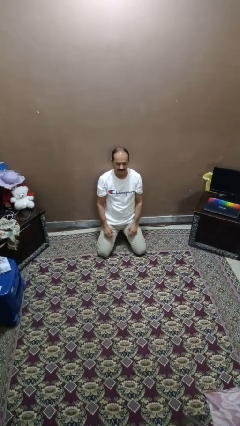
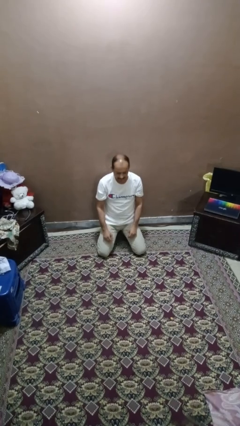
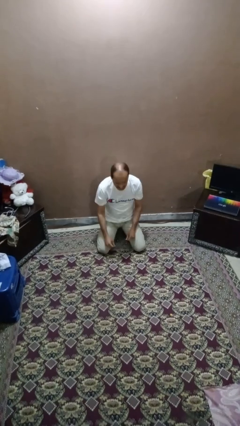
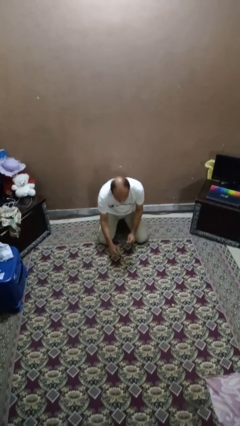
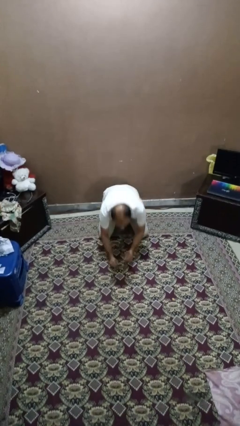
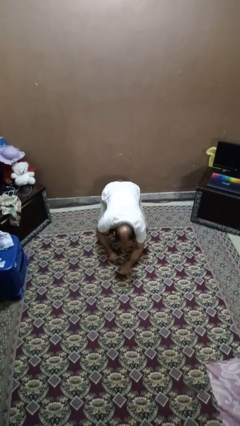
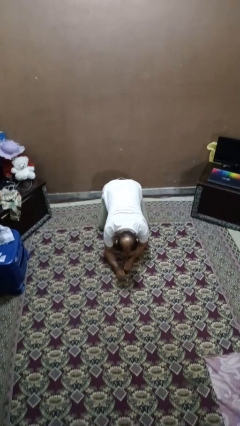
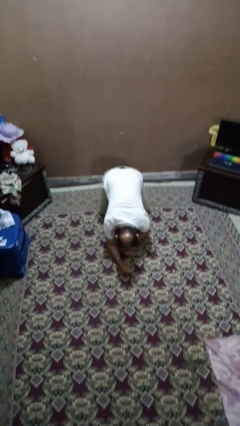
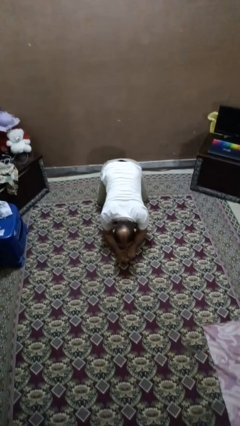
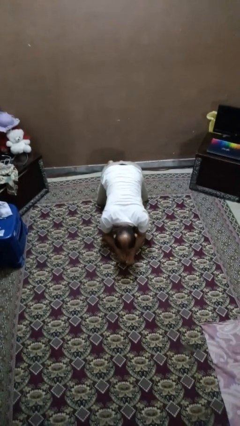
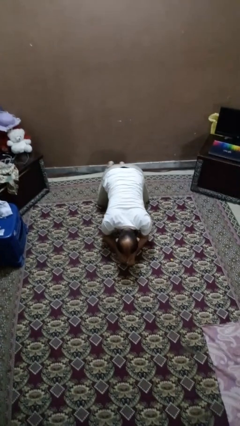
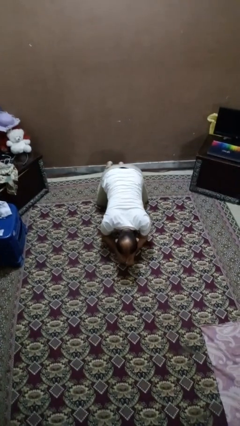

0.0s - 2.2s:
person crawls

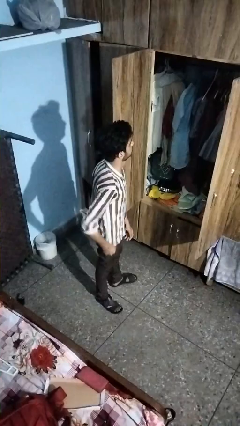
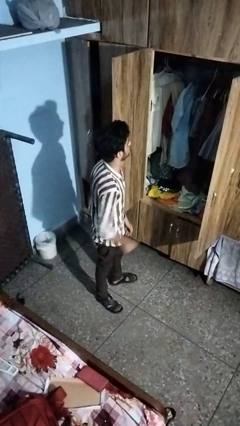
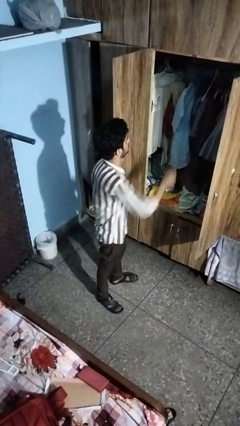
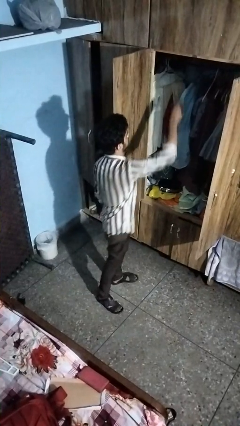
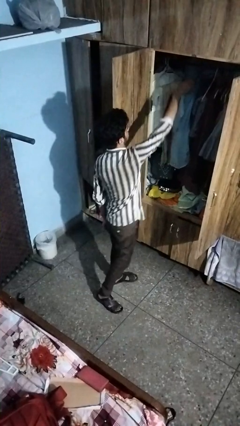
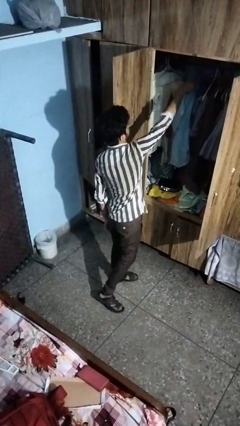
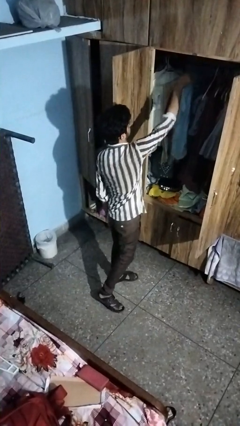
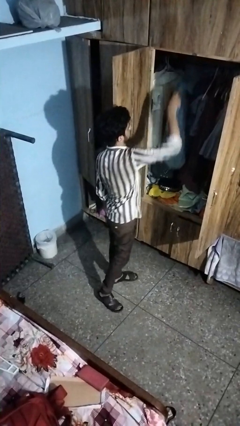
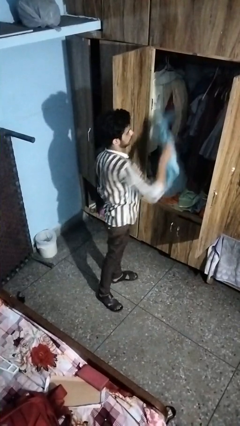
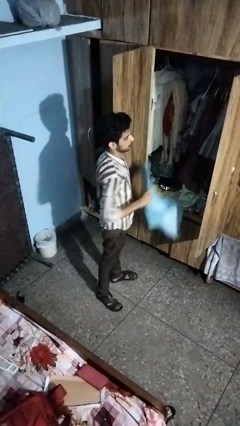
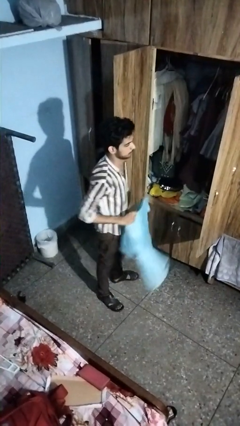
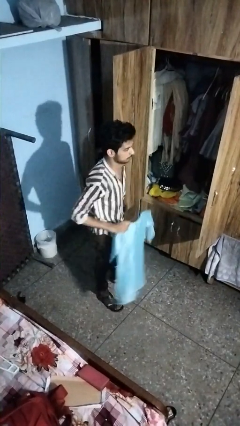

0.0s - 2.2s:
person takes clothes from closet

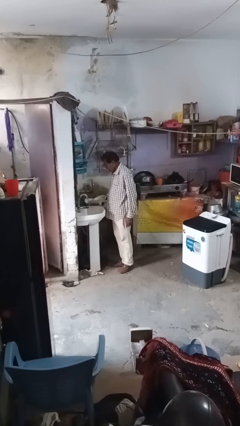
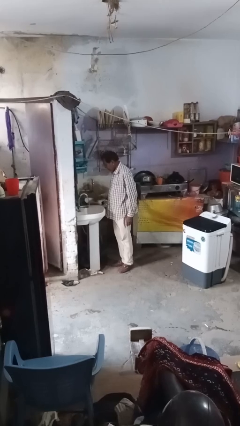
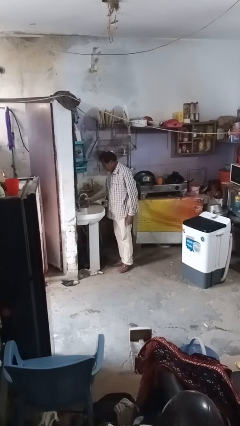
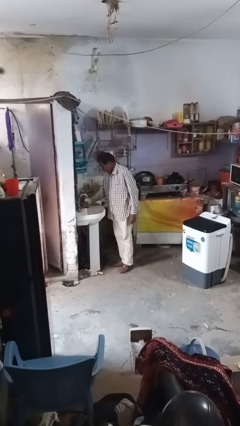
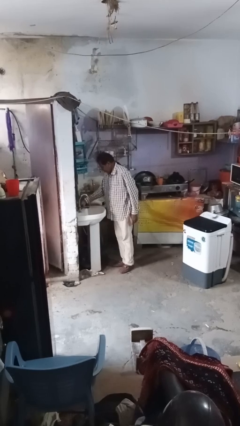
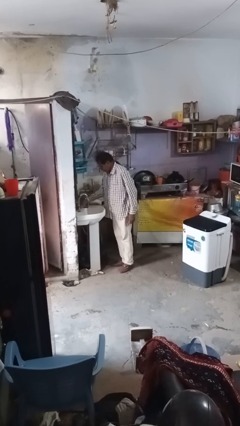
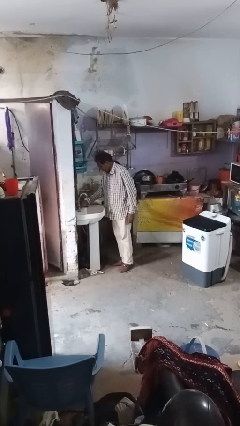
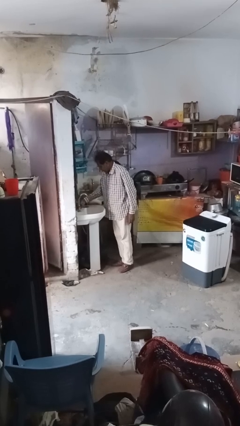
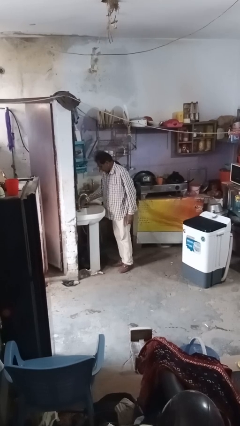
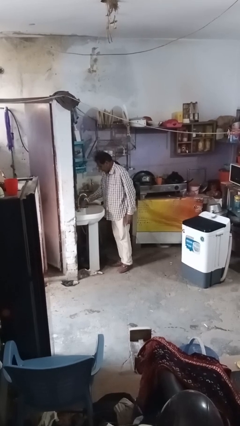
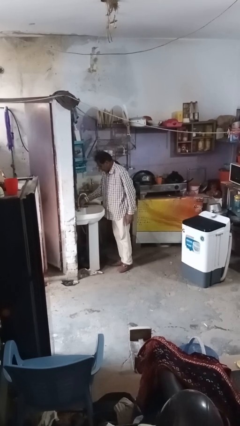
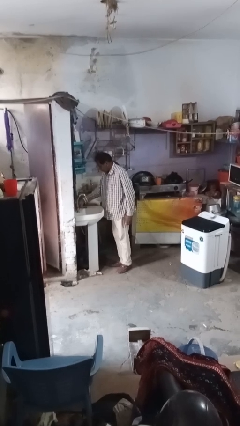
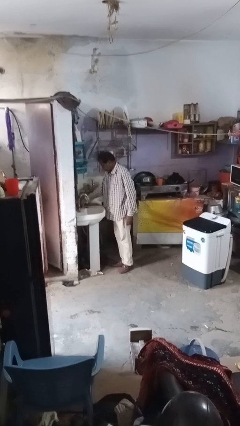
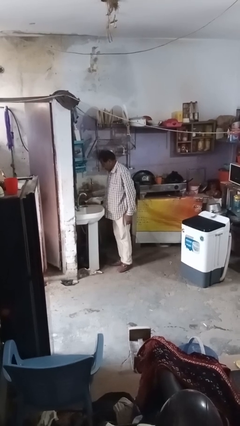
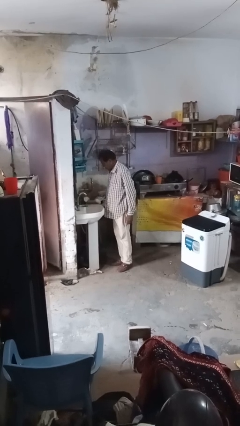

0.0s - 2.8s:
person turns off faucet

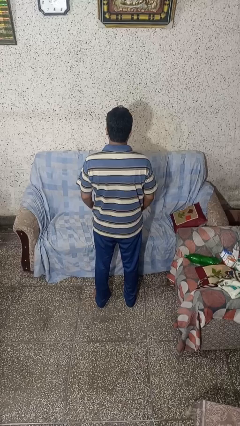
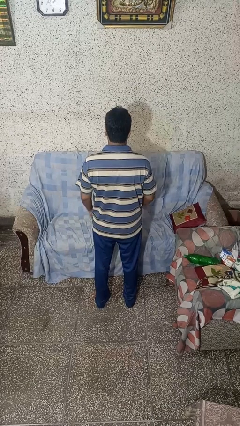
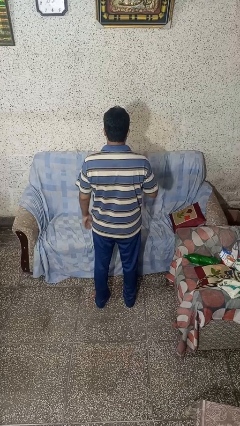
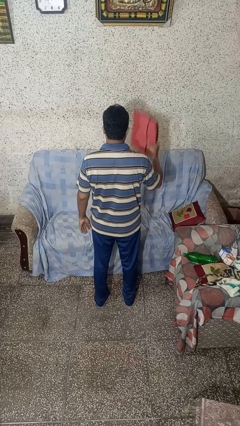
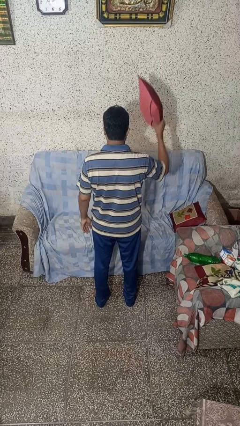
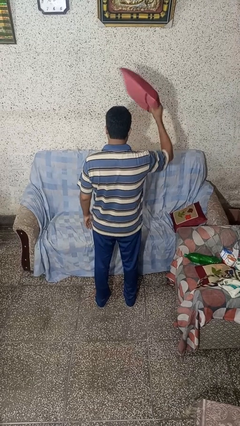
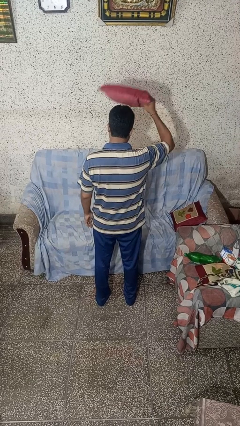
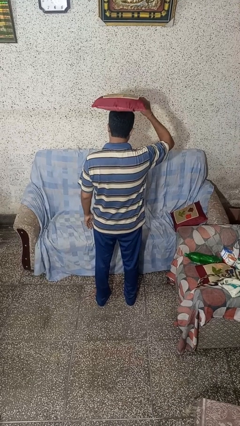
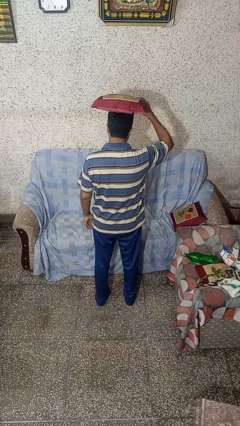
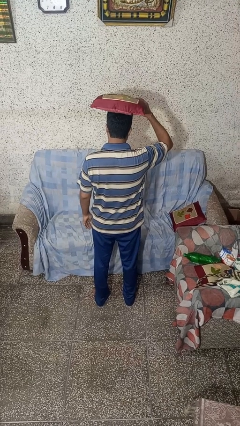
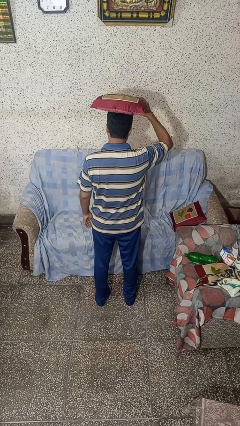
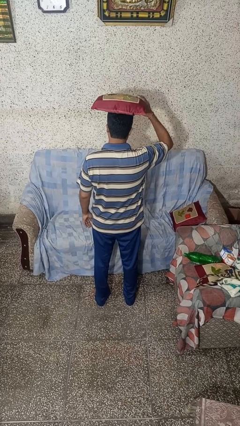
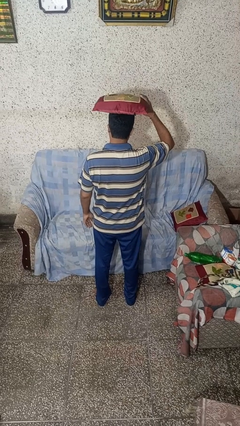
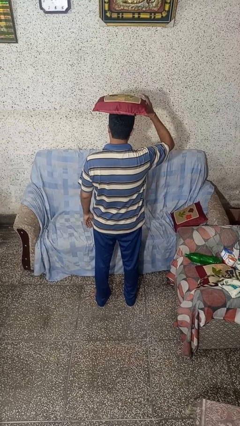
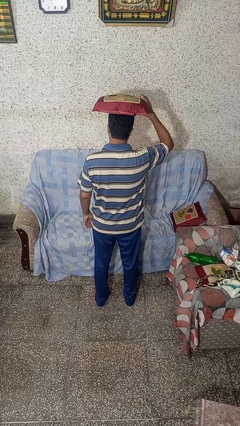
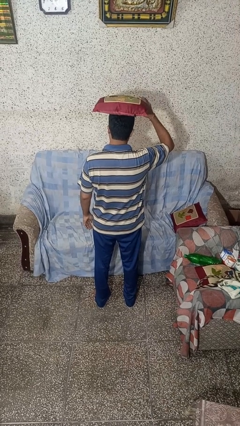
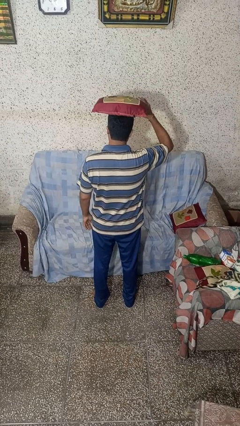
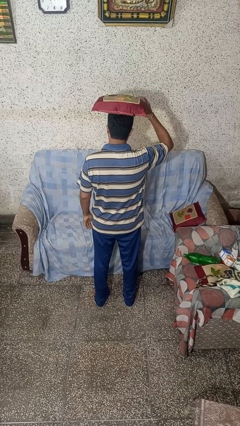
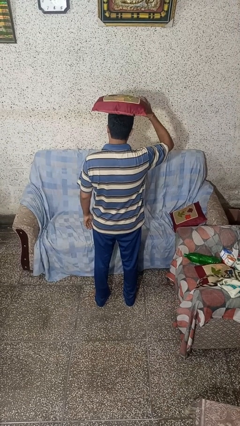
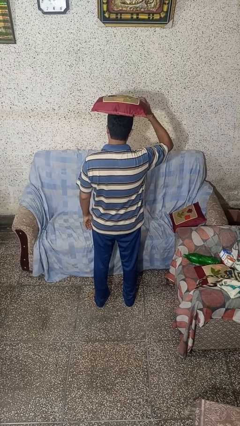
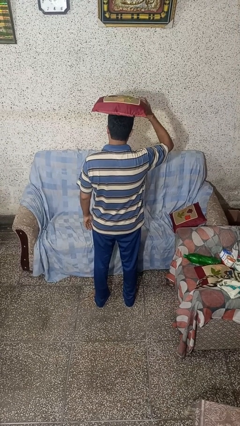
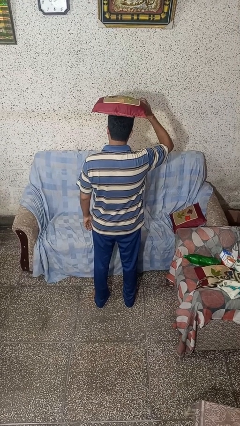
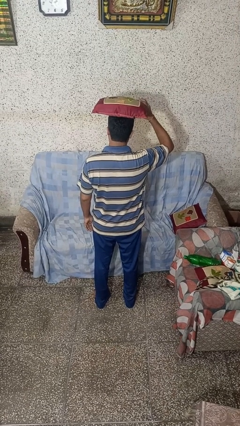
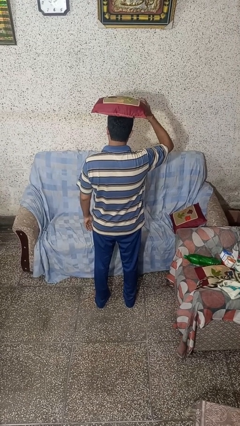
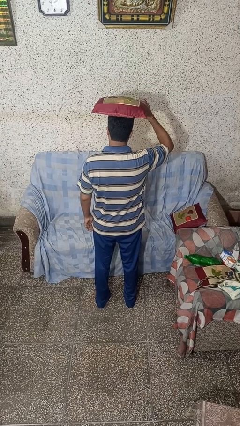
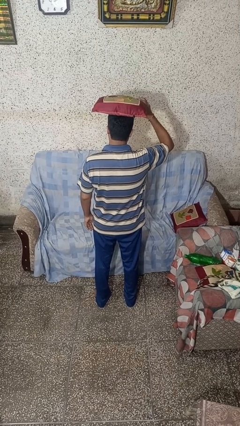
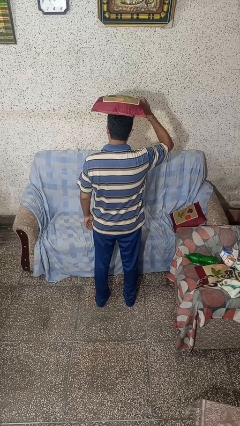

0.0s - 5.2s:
person holds object above head

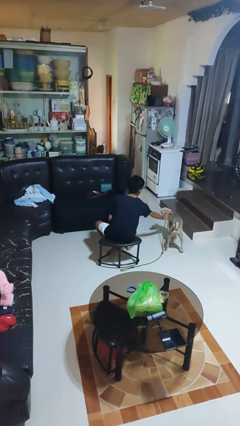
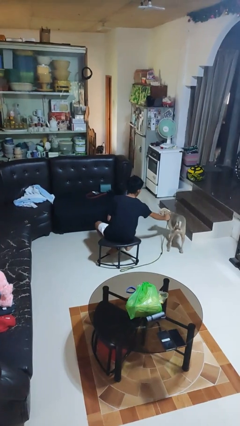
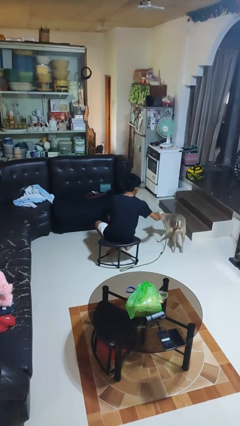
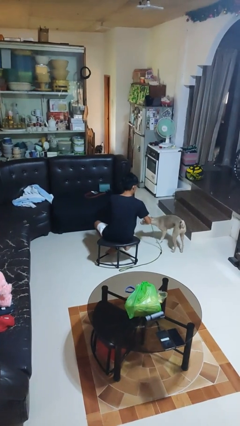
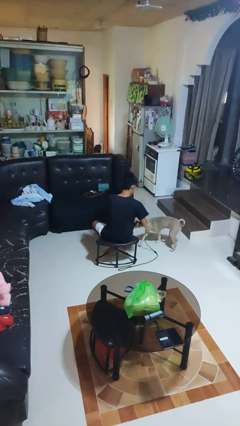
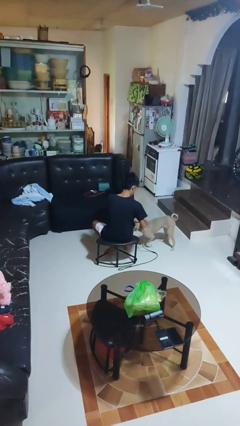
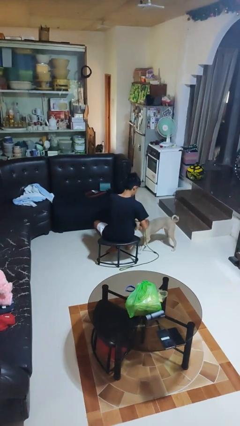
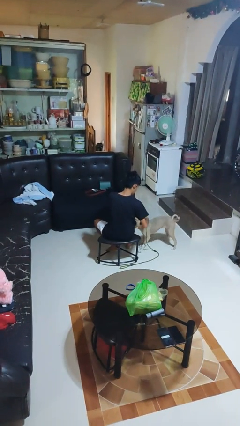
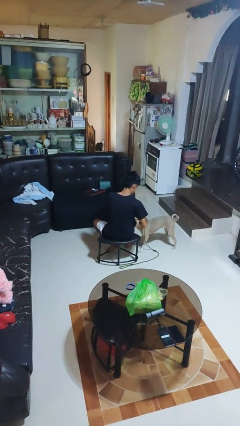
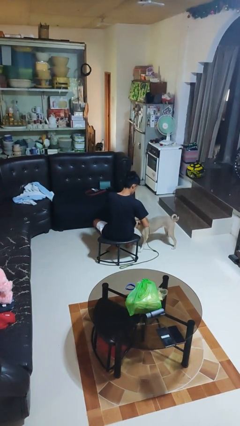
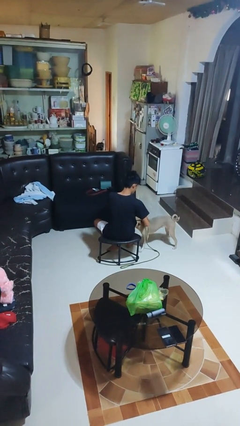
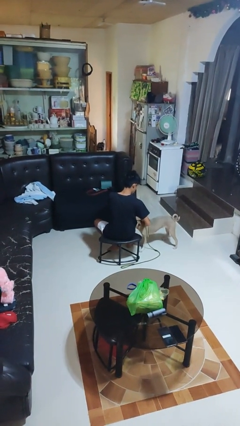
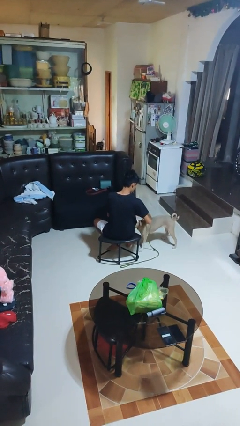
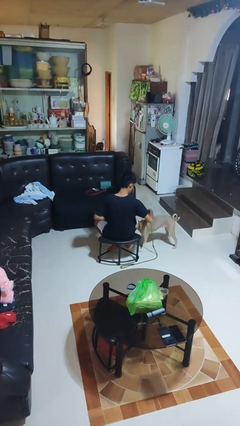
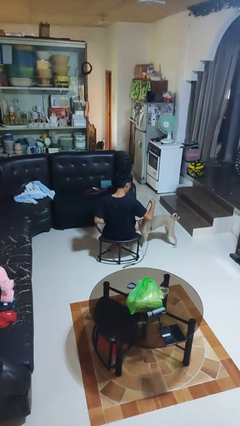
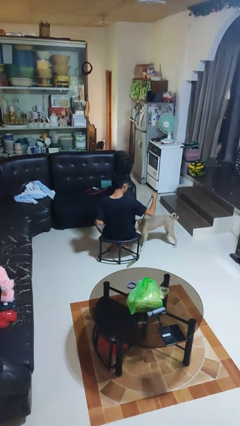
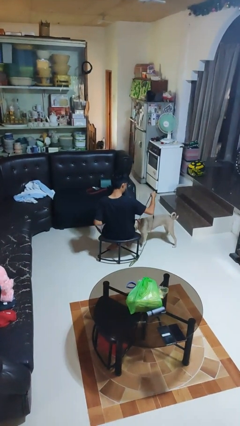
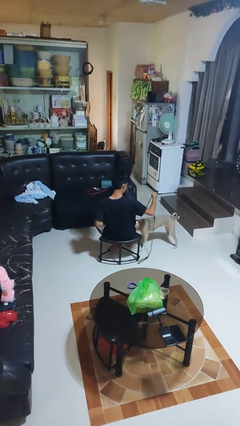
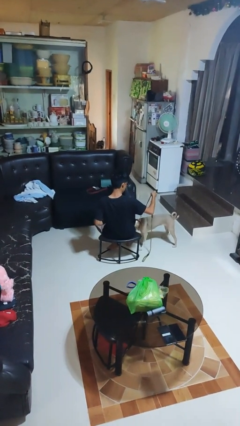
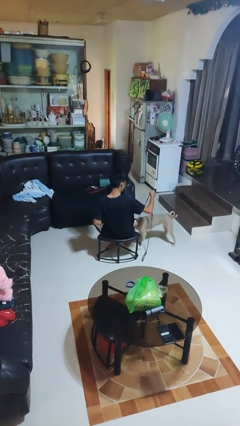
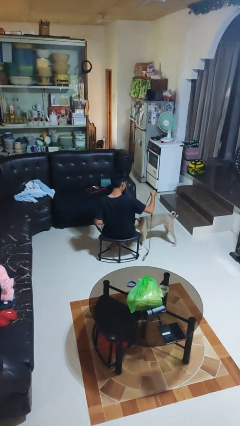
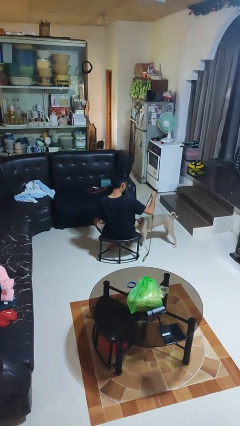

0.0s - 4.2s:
person attaches leash to dog

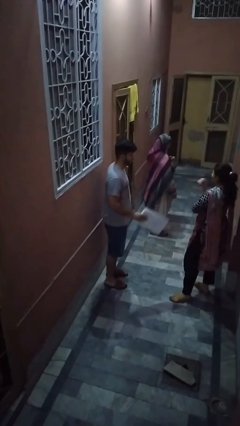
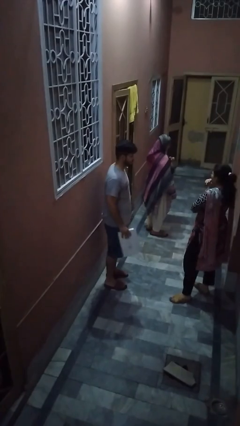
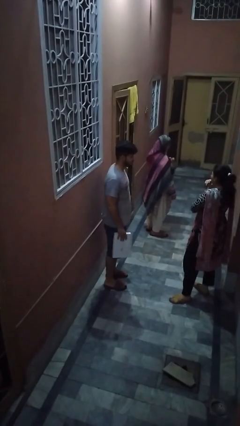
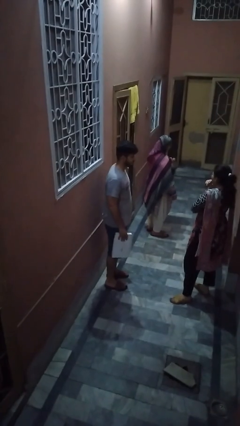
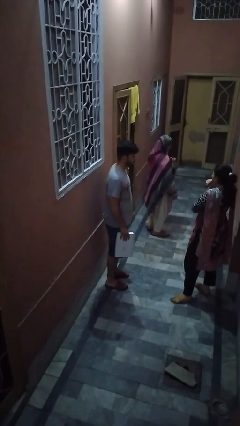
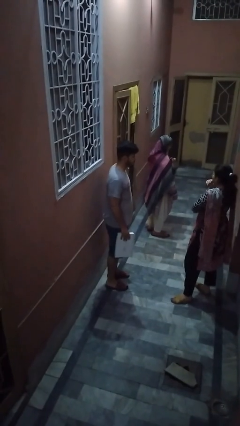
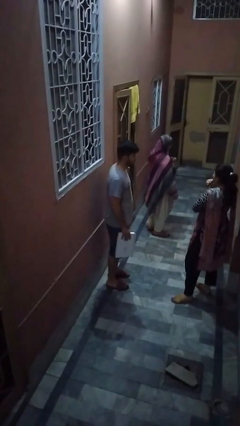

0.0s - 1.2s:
person transfers object to person
